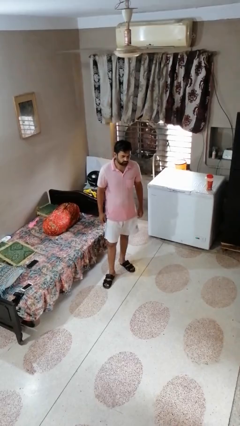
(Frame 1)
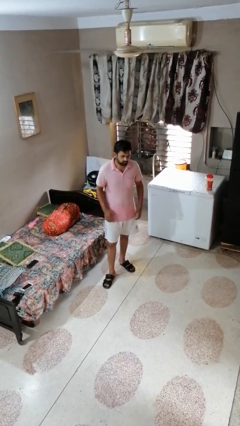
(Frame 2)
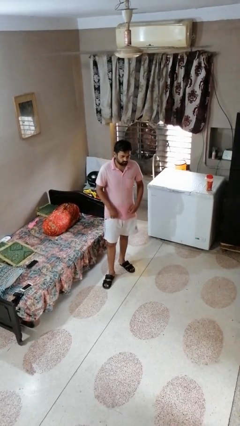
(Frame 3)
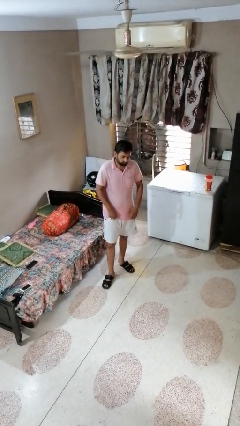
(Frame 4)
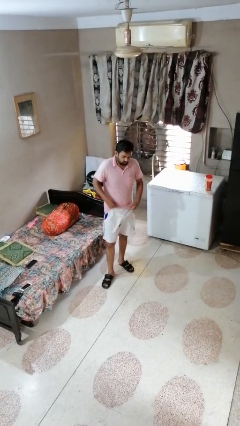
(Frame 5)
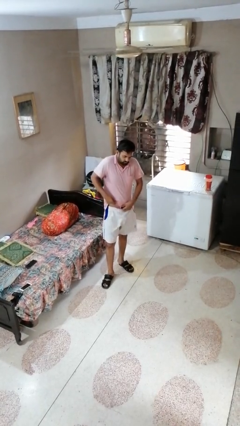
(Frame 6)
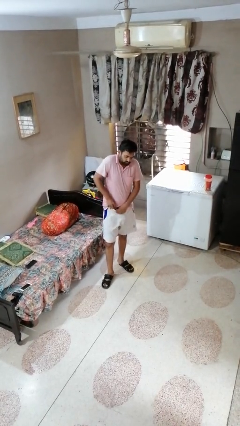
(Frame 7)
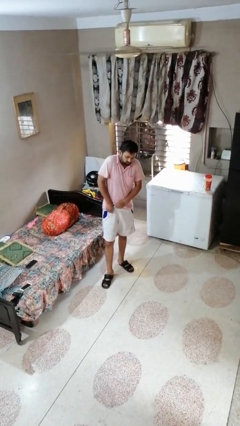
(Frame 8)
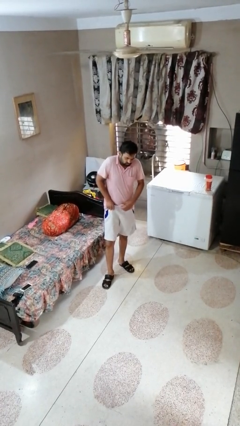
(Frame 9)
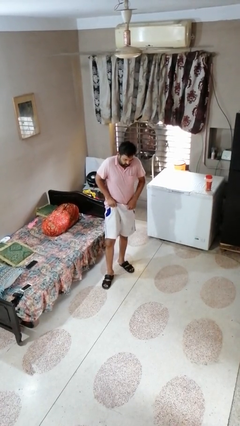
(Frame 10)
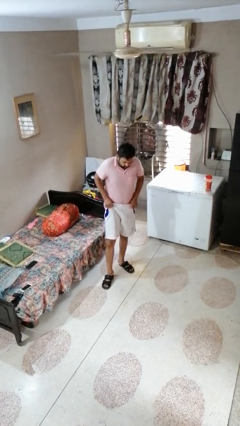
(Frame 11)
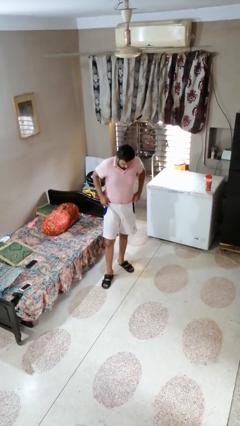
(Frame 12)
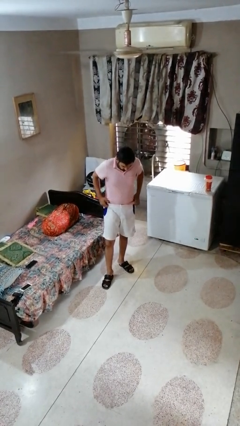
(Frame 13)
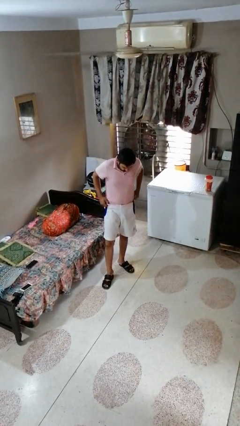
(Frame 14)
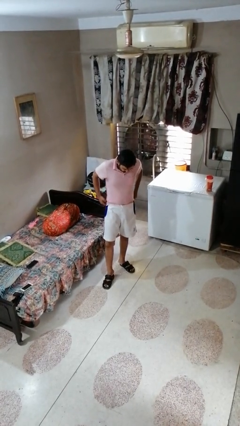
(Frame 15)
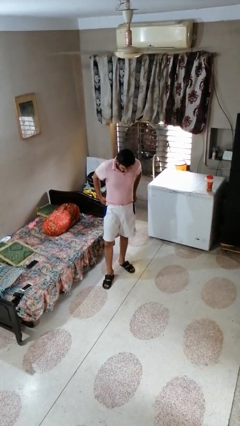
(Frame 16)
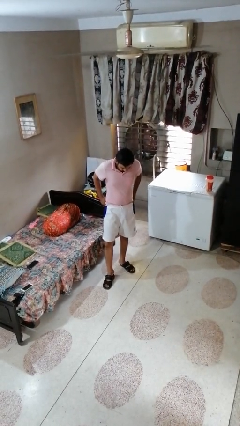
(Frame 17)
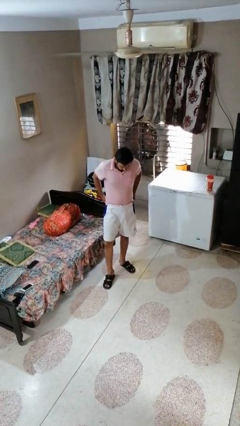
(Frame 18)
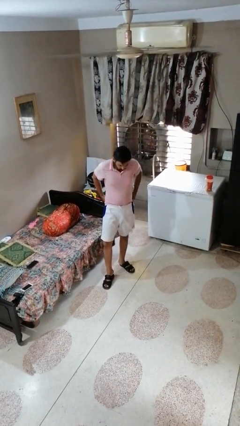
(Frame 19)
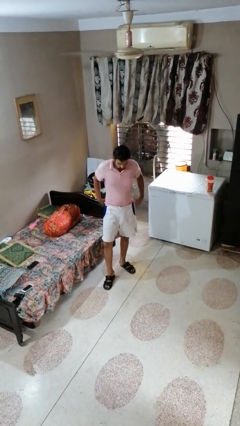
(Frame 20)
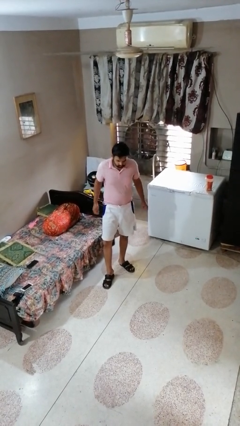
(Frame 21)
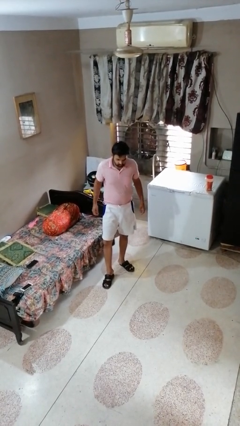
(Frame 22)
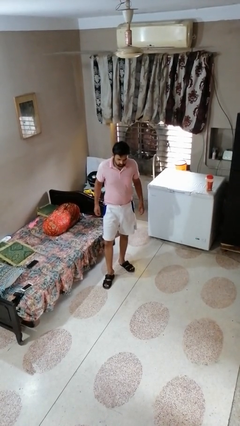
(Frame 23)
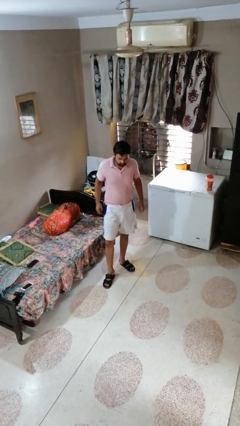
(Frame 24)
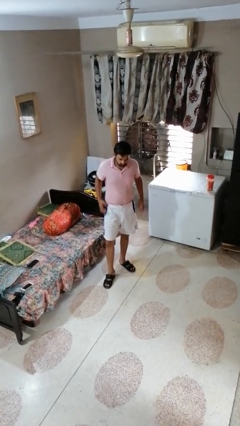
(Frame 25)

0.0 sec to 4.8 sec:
person tucks in shirt

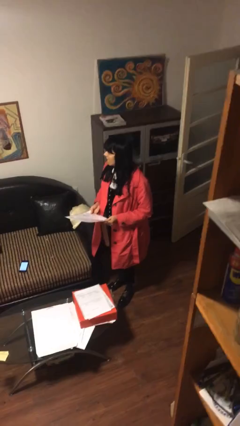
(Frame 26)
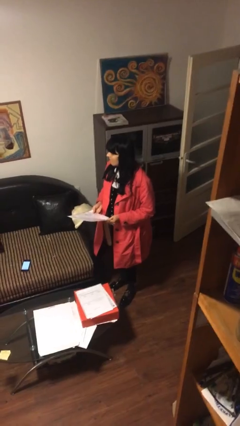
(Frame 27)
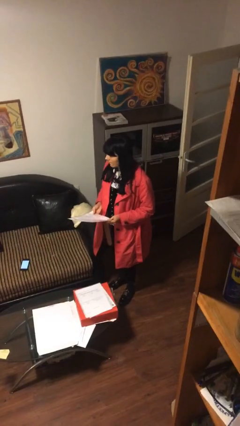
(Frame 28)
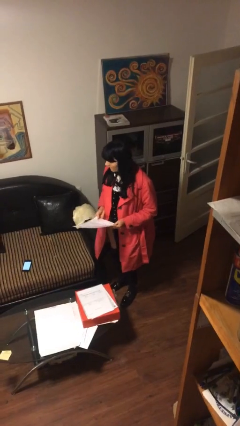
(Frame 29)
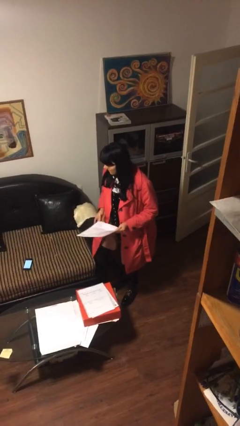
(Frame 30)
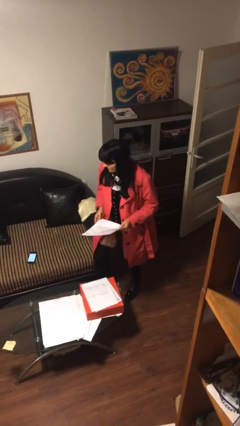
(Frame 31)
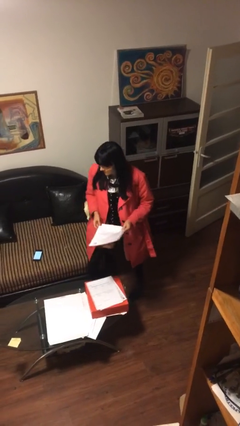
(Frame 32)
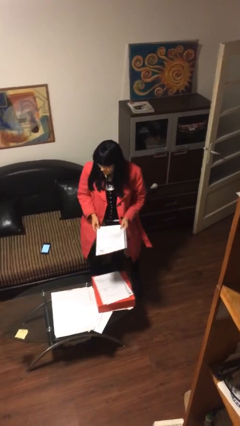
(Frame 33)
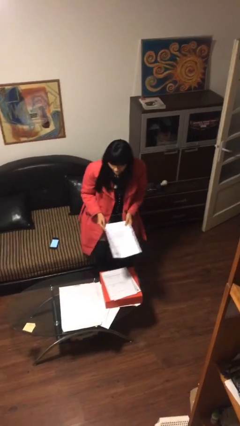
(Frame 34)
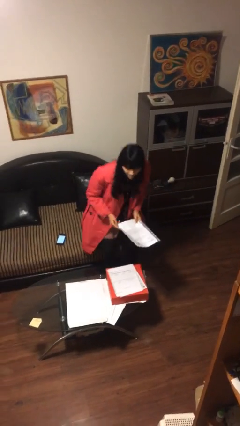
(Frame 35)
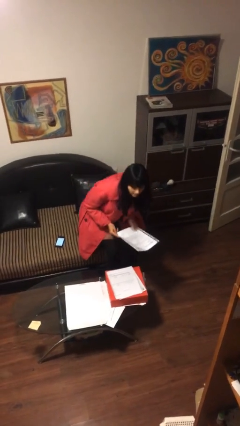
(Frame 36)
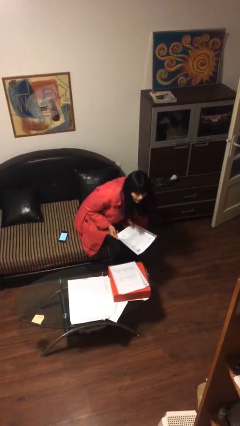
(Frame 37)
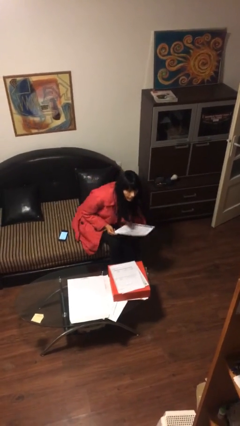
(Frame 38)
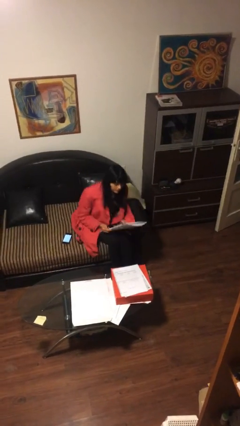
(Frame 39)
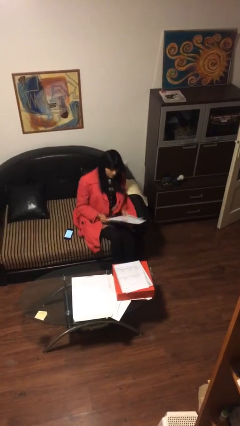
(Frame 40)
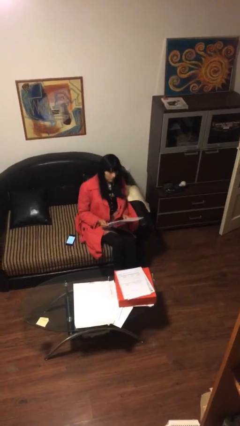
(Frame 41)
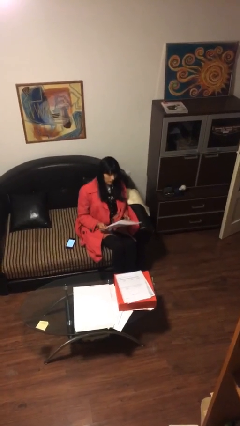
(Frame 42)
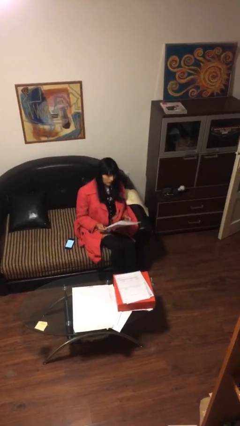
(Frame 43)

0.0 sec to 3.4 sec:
person sits down

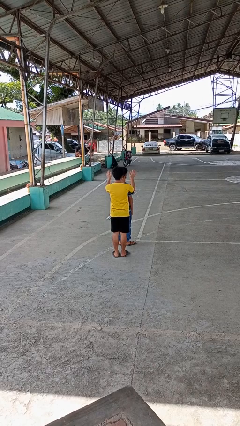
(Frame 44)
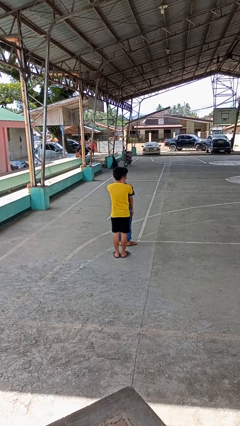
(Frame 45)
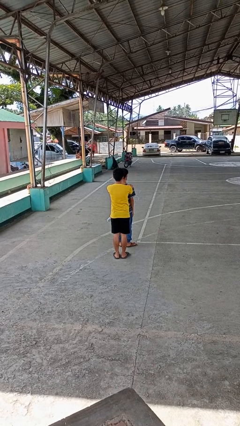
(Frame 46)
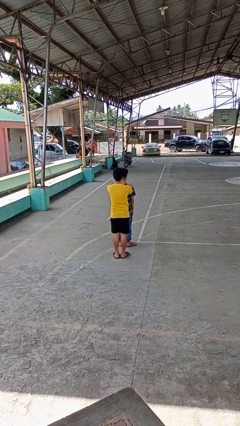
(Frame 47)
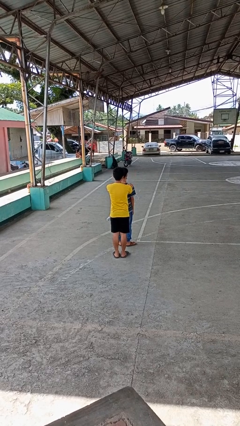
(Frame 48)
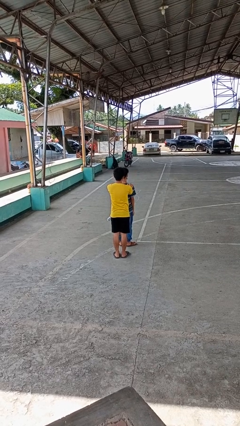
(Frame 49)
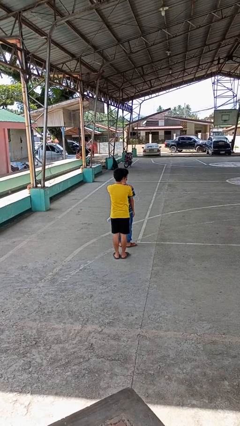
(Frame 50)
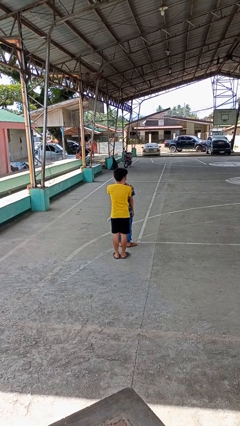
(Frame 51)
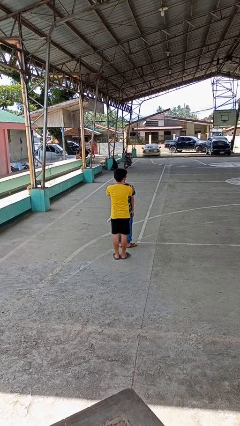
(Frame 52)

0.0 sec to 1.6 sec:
person grabs person by shoulder

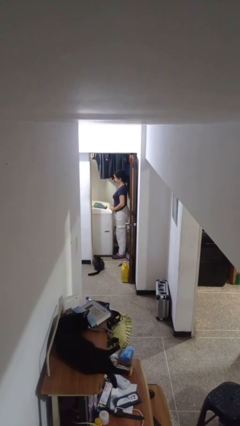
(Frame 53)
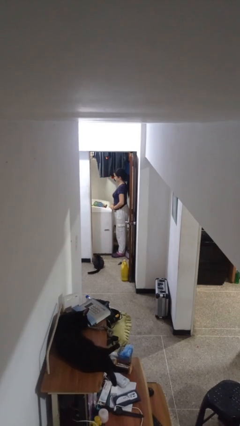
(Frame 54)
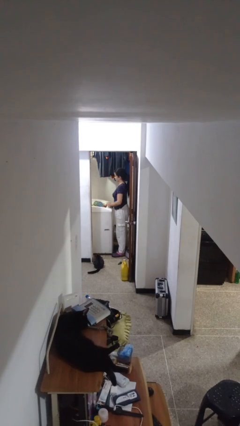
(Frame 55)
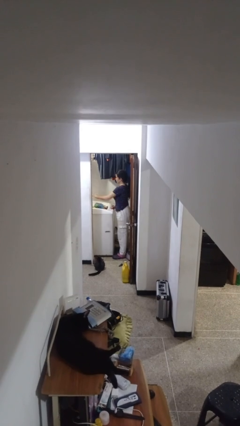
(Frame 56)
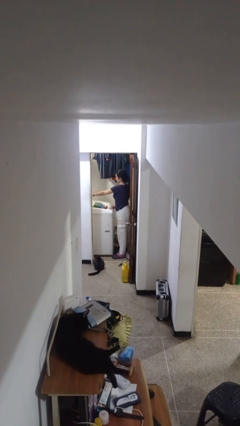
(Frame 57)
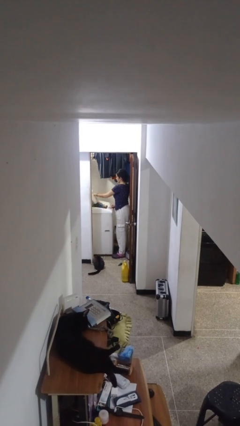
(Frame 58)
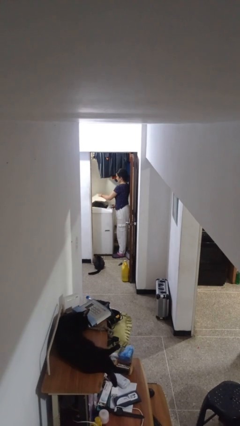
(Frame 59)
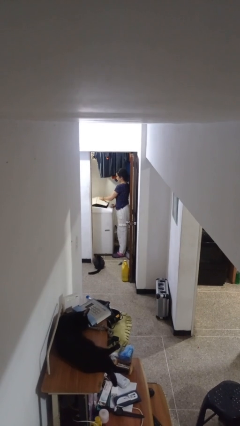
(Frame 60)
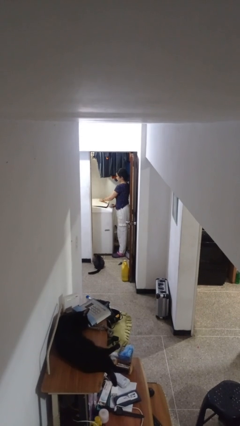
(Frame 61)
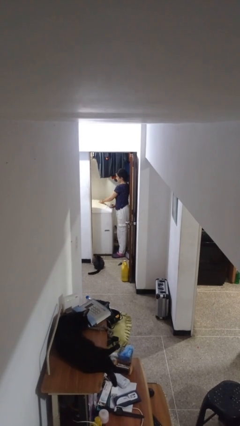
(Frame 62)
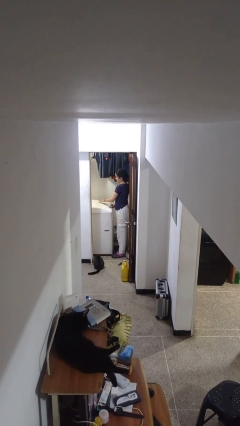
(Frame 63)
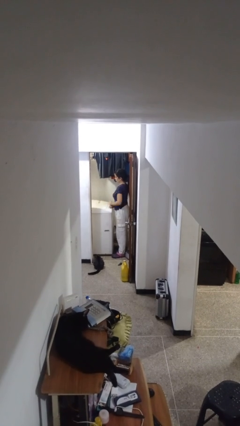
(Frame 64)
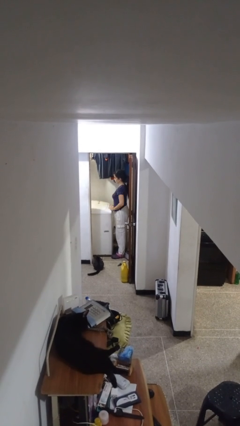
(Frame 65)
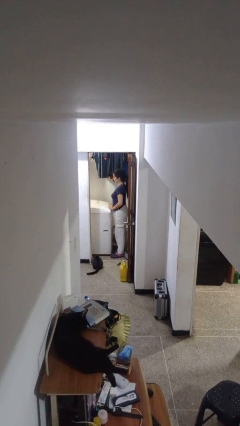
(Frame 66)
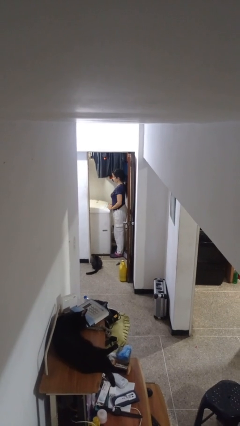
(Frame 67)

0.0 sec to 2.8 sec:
person closes clothes washer

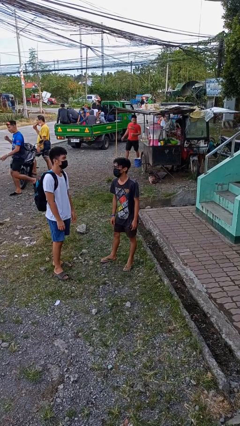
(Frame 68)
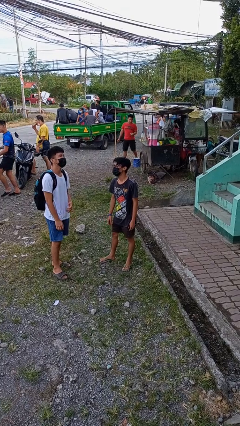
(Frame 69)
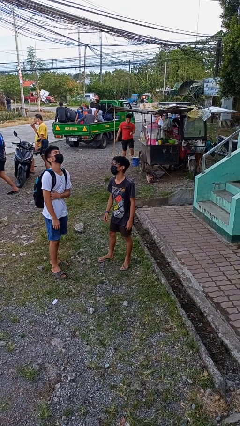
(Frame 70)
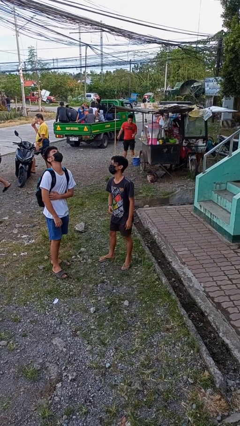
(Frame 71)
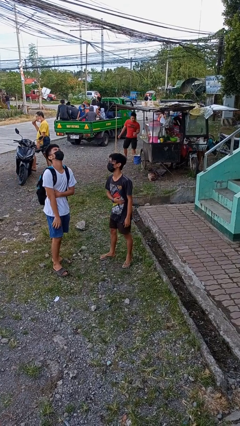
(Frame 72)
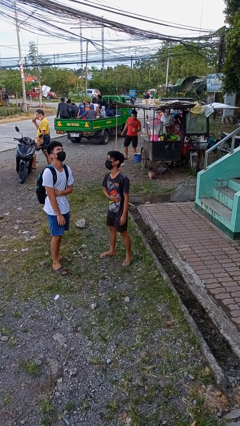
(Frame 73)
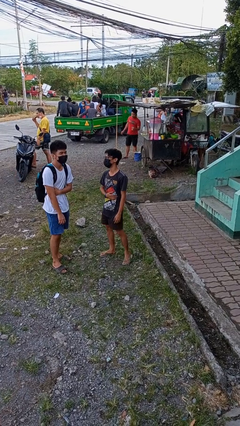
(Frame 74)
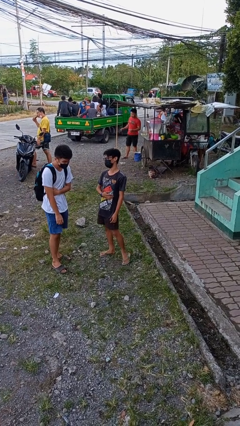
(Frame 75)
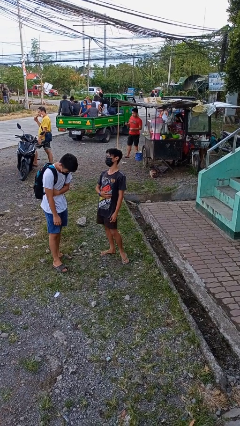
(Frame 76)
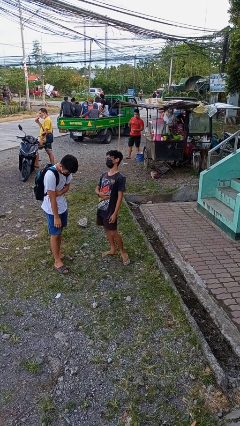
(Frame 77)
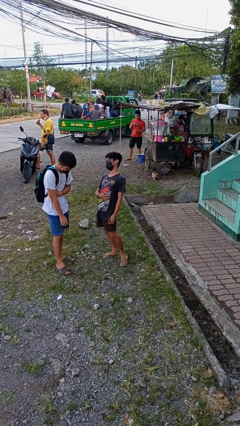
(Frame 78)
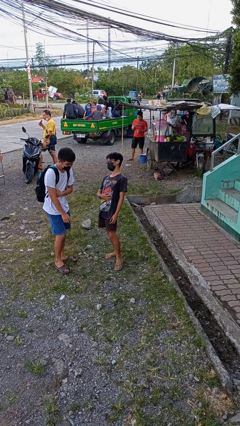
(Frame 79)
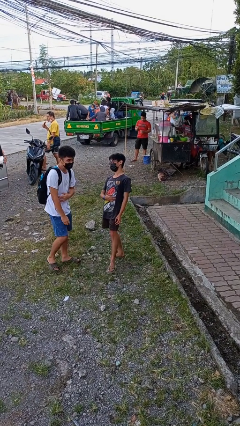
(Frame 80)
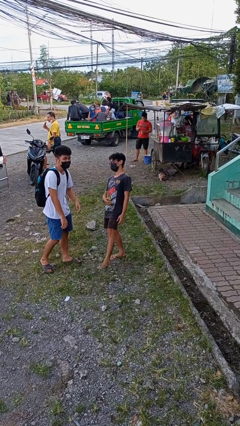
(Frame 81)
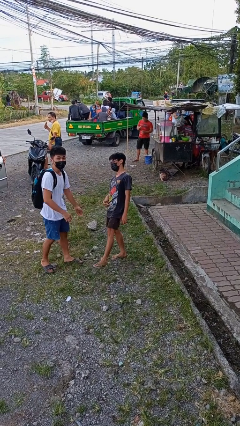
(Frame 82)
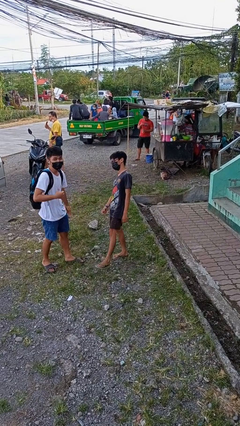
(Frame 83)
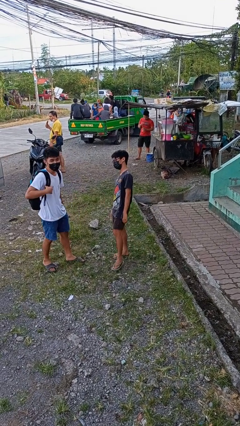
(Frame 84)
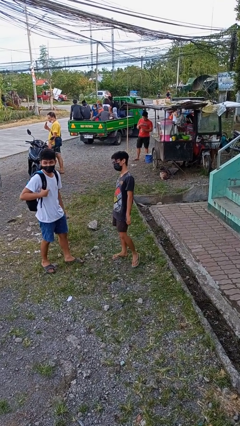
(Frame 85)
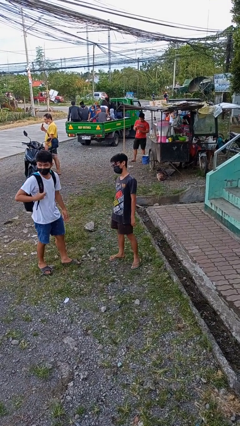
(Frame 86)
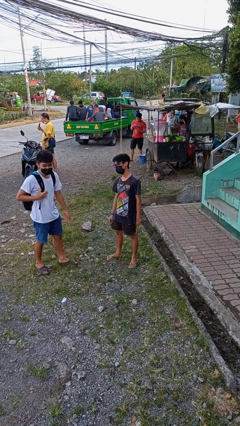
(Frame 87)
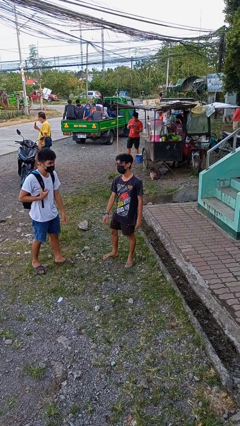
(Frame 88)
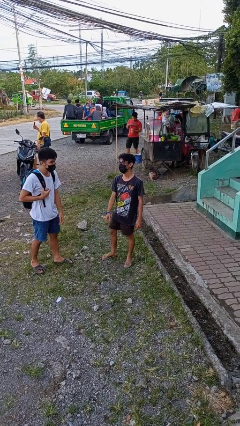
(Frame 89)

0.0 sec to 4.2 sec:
person laughs with person

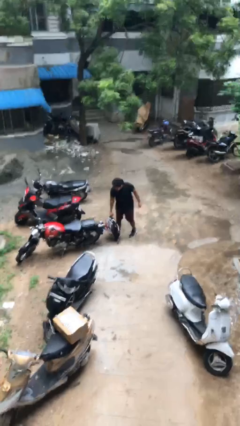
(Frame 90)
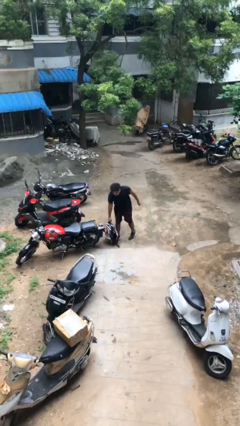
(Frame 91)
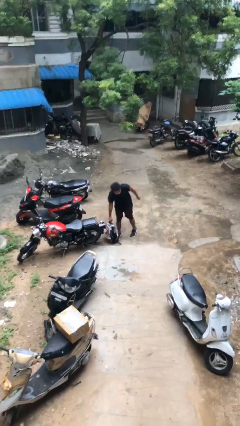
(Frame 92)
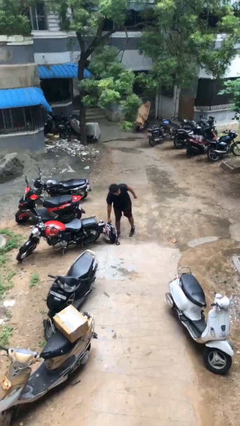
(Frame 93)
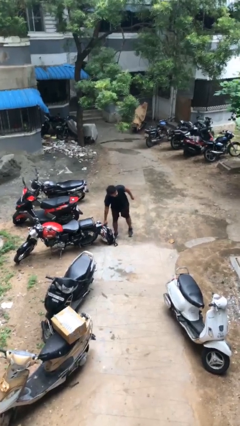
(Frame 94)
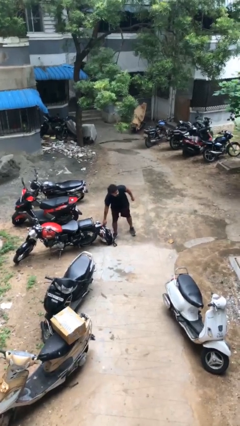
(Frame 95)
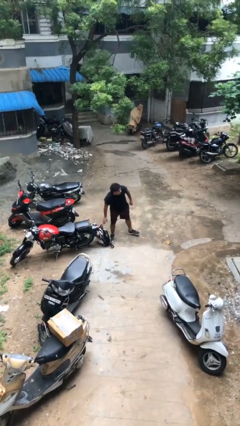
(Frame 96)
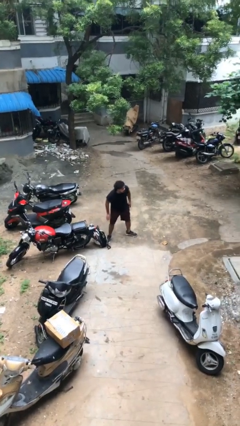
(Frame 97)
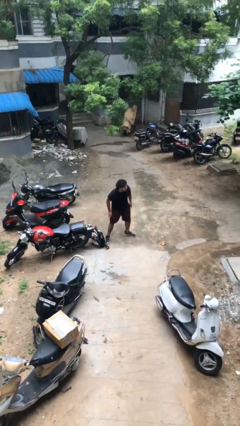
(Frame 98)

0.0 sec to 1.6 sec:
person puts down object on floor
